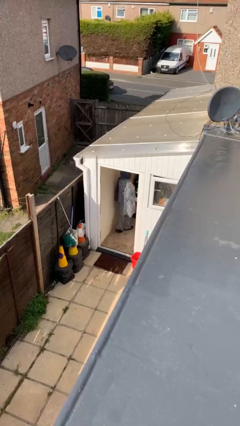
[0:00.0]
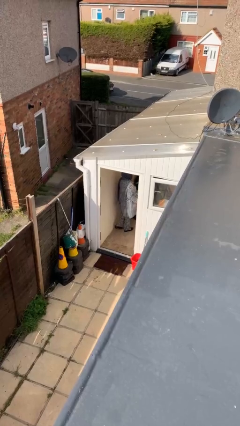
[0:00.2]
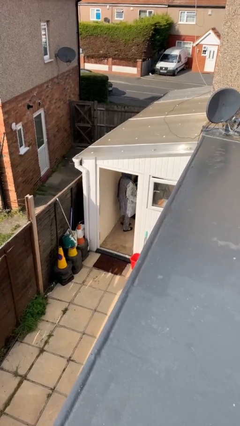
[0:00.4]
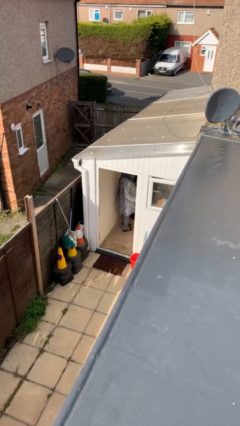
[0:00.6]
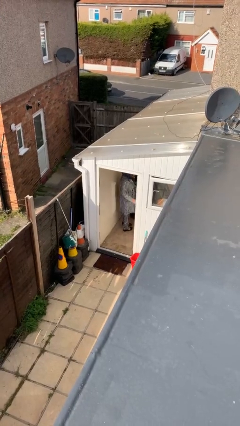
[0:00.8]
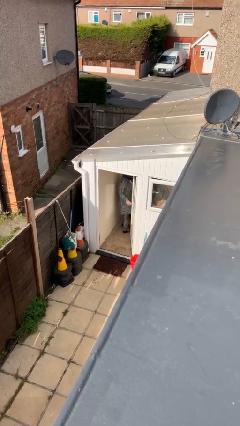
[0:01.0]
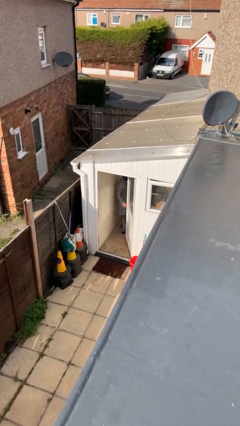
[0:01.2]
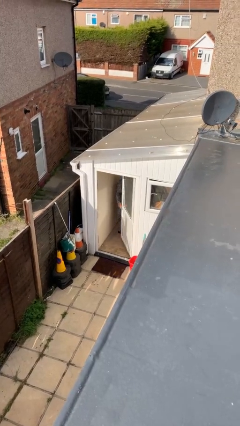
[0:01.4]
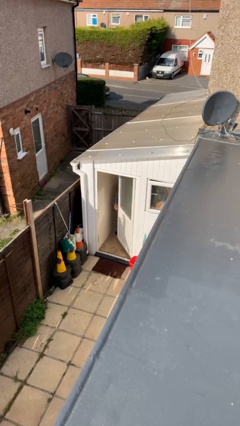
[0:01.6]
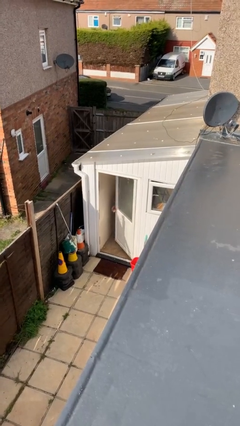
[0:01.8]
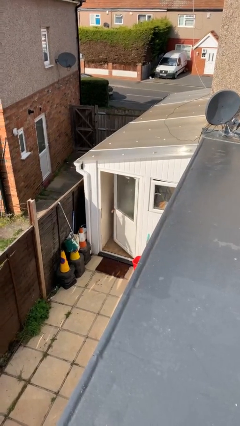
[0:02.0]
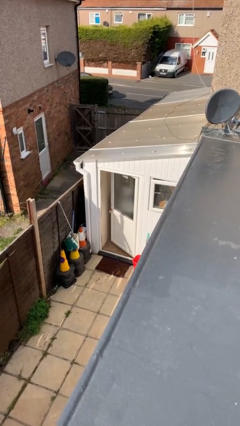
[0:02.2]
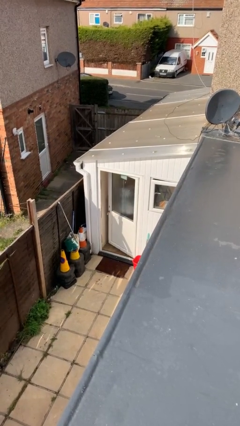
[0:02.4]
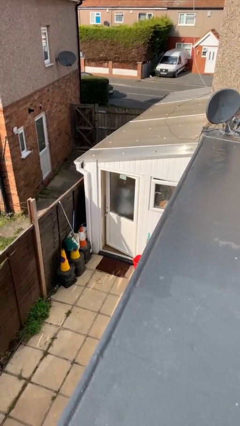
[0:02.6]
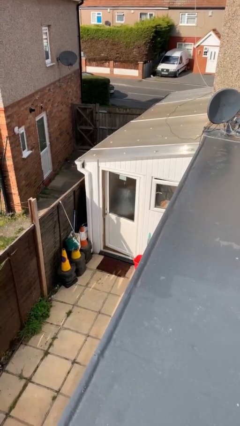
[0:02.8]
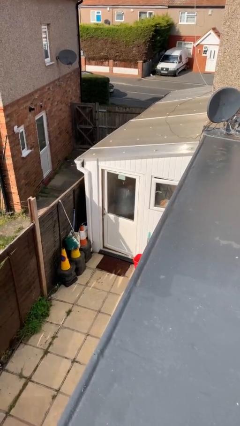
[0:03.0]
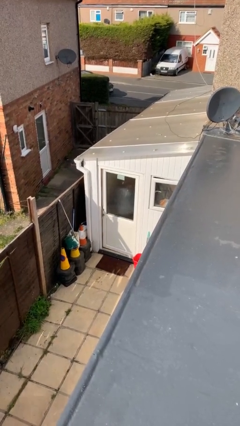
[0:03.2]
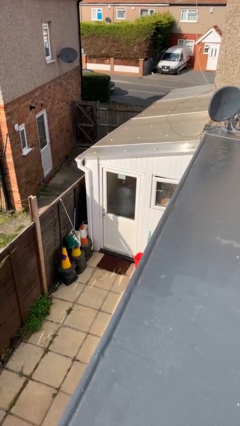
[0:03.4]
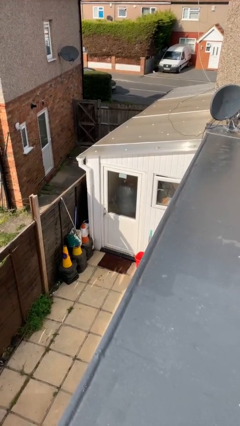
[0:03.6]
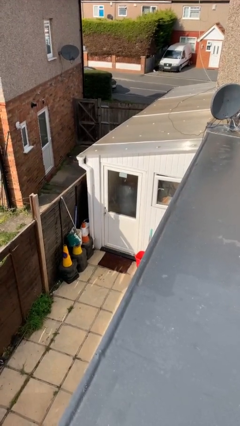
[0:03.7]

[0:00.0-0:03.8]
person closes facility door

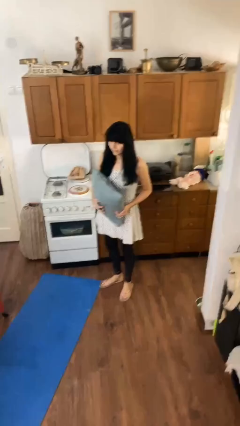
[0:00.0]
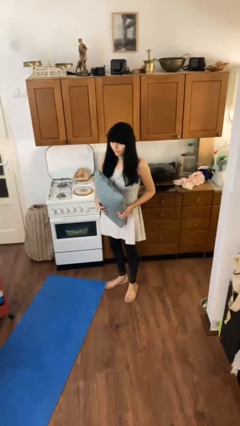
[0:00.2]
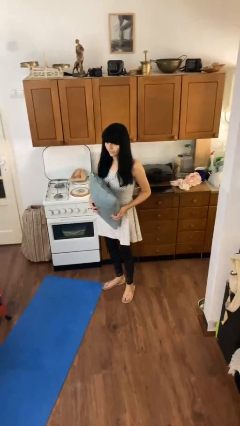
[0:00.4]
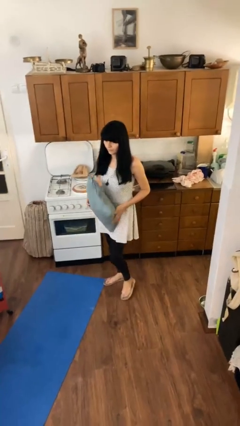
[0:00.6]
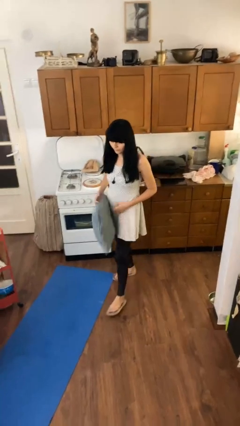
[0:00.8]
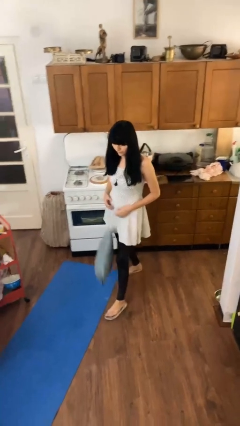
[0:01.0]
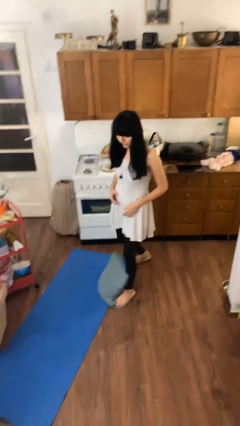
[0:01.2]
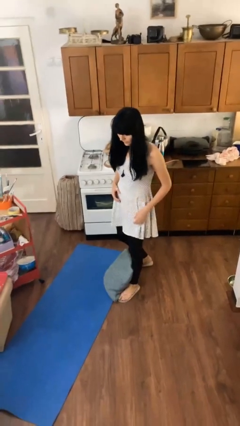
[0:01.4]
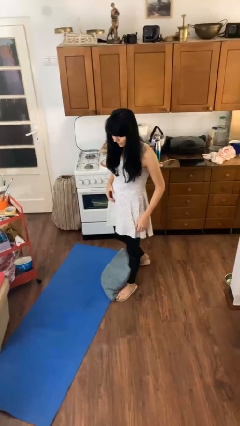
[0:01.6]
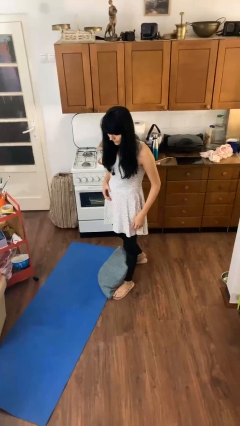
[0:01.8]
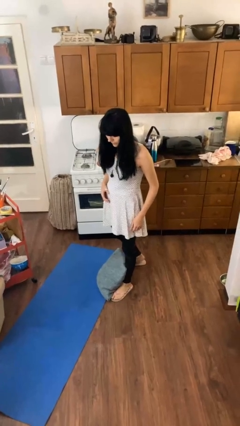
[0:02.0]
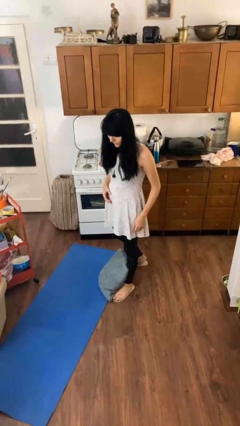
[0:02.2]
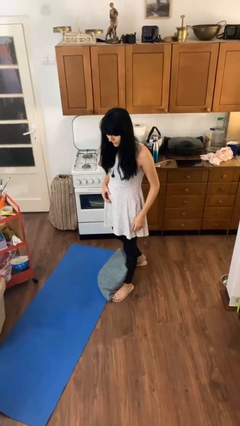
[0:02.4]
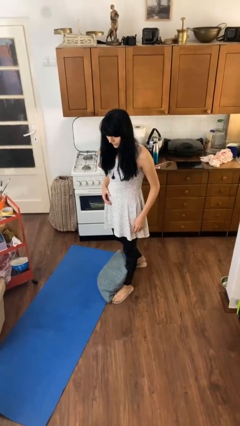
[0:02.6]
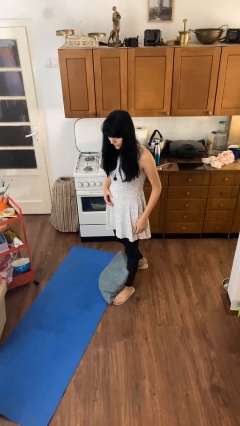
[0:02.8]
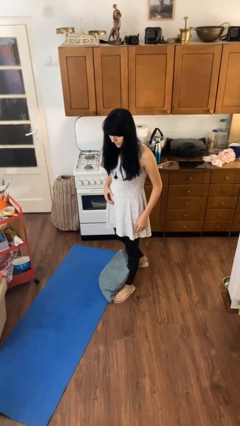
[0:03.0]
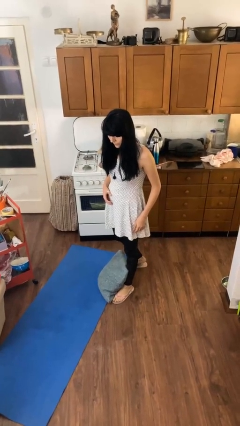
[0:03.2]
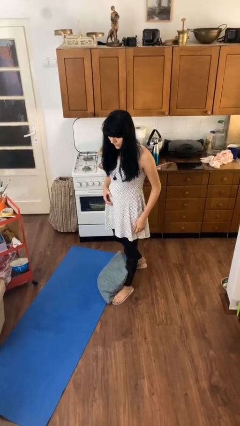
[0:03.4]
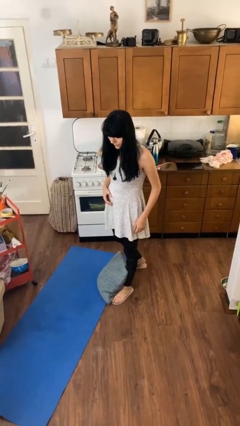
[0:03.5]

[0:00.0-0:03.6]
person drops object

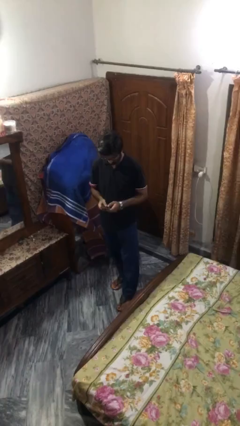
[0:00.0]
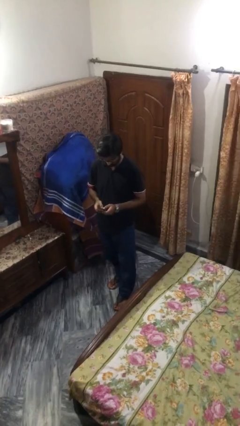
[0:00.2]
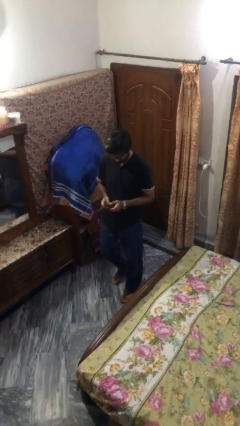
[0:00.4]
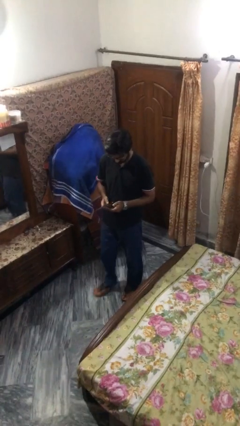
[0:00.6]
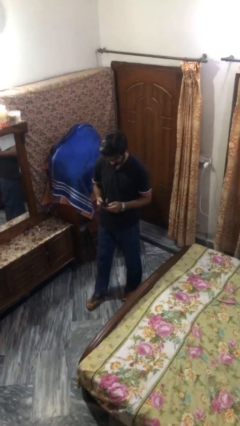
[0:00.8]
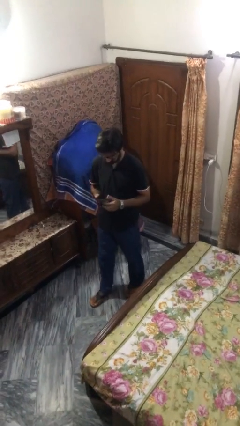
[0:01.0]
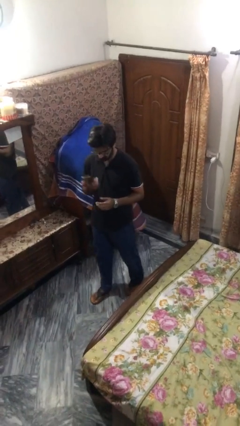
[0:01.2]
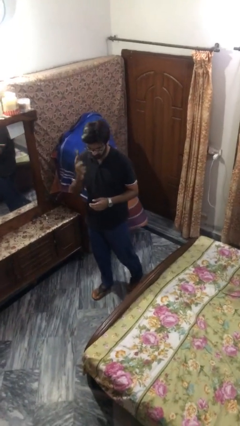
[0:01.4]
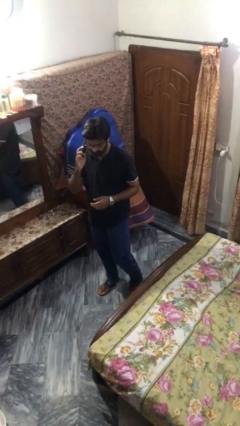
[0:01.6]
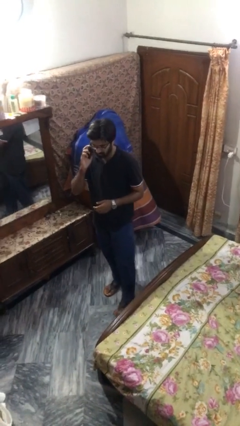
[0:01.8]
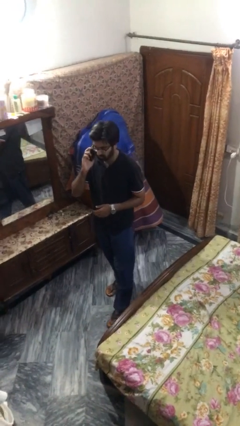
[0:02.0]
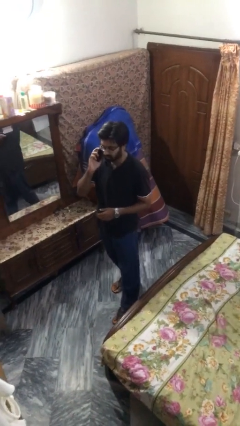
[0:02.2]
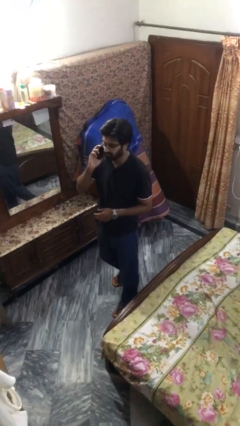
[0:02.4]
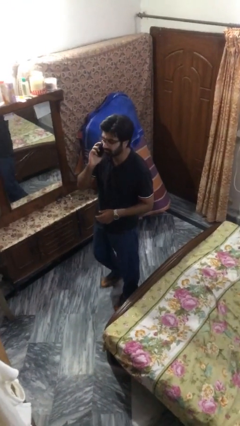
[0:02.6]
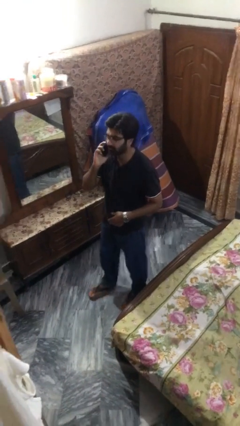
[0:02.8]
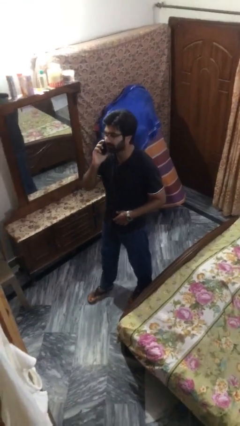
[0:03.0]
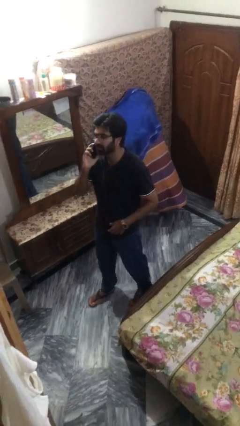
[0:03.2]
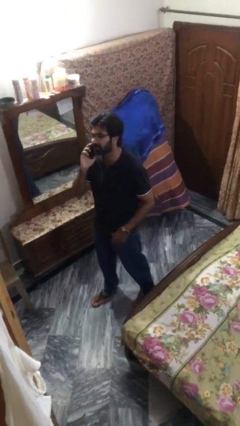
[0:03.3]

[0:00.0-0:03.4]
person talks on phone

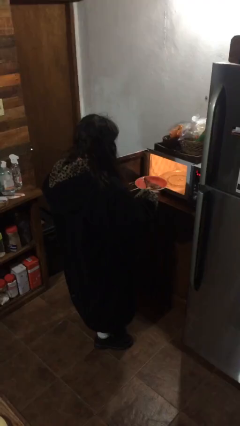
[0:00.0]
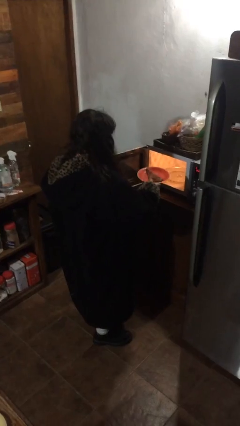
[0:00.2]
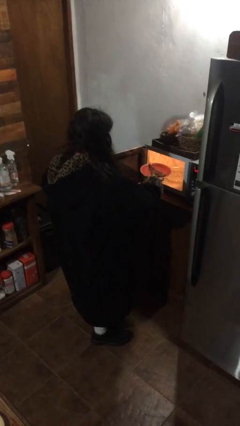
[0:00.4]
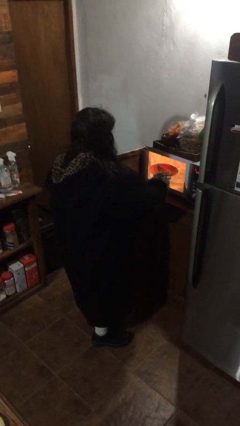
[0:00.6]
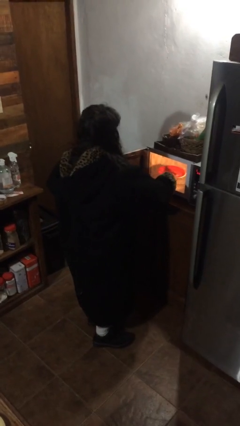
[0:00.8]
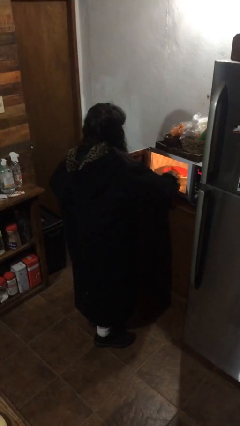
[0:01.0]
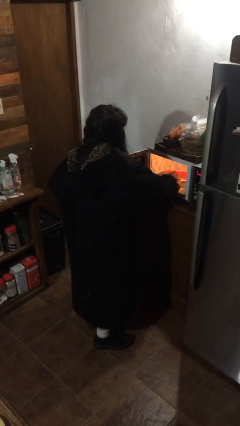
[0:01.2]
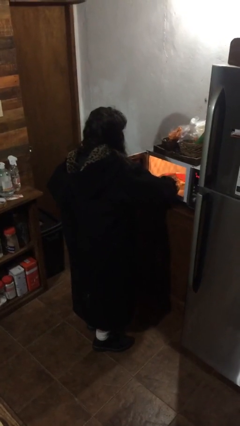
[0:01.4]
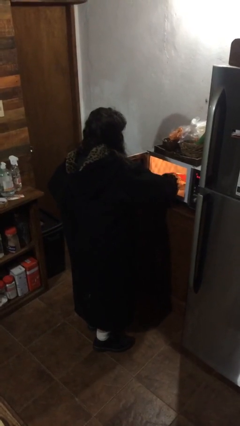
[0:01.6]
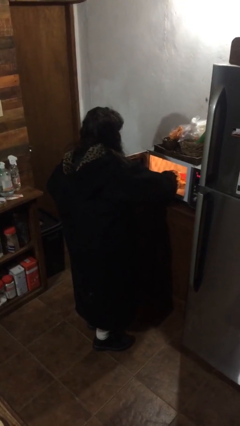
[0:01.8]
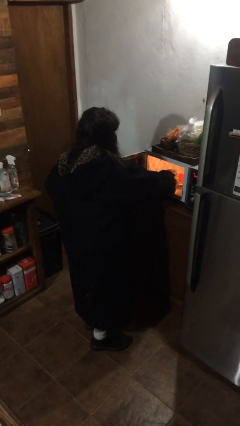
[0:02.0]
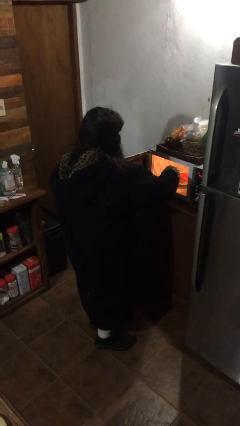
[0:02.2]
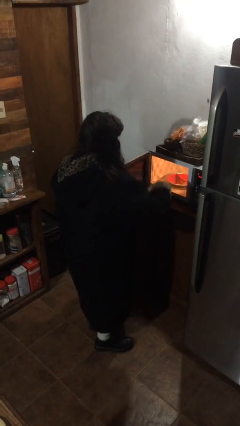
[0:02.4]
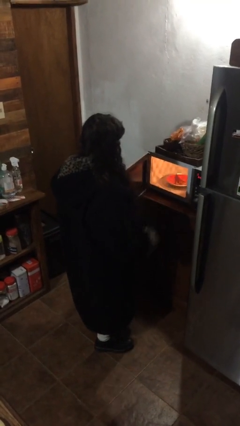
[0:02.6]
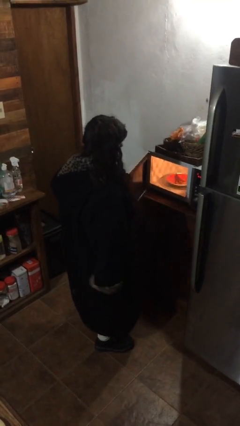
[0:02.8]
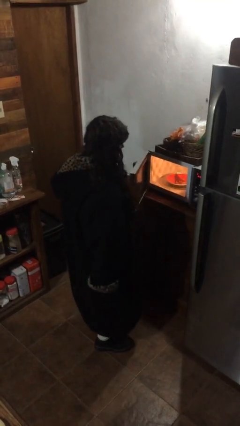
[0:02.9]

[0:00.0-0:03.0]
person puts object into microwave

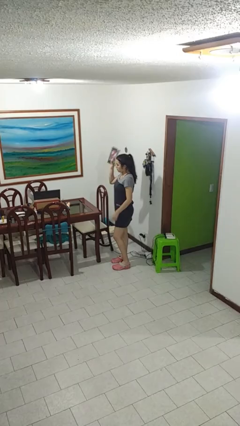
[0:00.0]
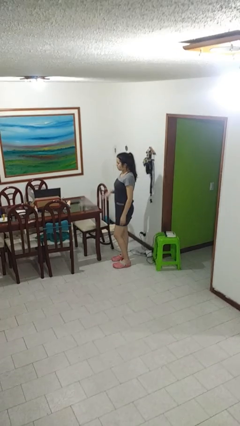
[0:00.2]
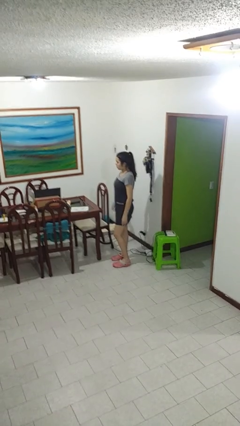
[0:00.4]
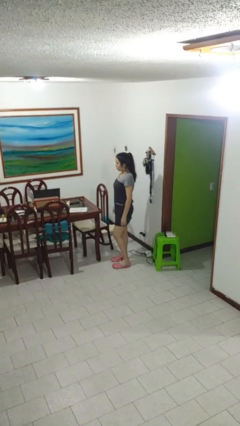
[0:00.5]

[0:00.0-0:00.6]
person throws object on table

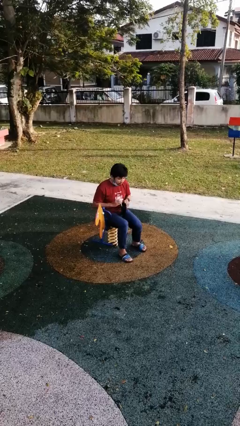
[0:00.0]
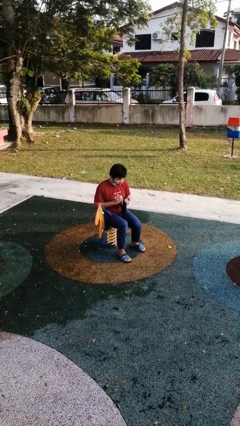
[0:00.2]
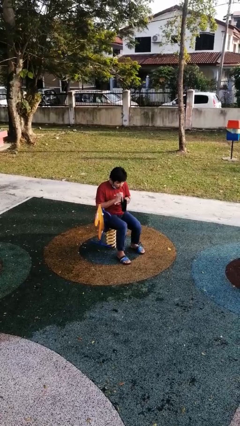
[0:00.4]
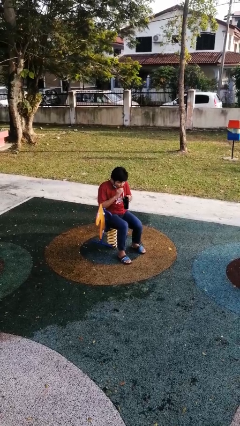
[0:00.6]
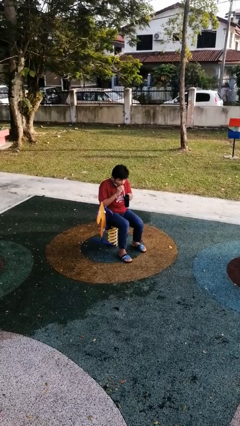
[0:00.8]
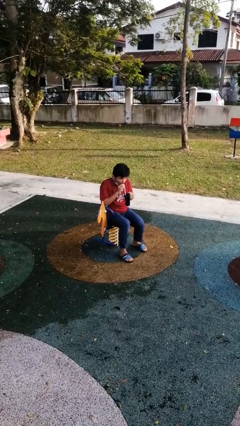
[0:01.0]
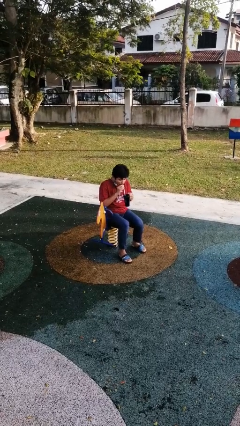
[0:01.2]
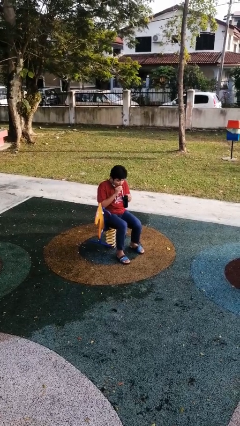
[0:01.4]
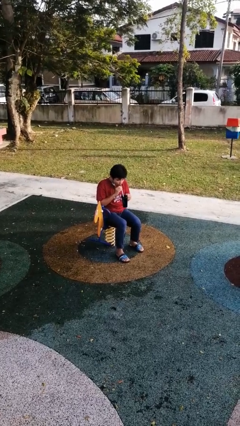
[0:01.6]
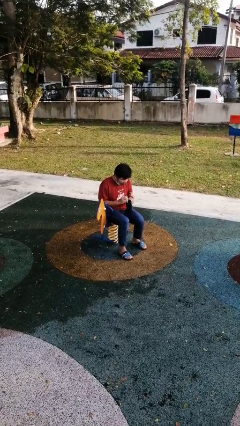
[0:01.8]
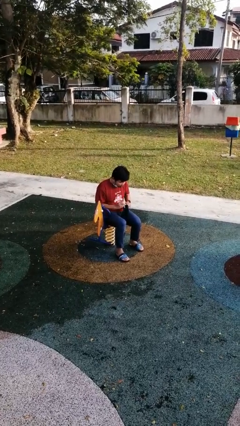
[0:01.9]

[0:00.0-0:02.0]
person drinks from straw

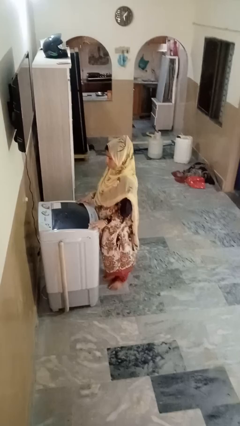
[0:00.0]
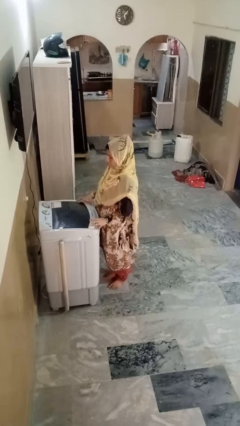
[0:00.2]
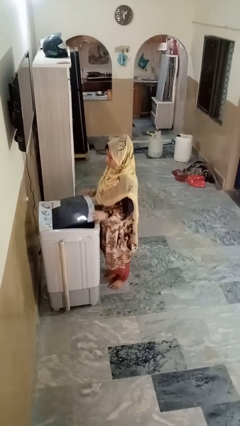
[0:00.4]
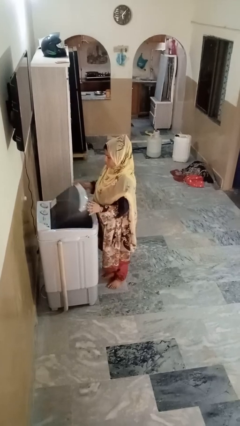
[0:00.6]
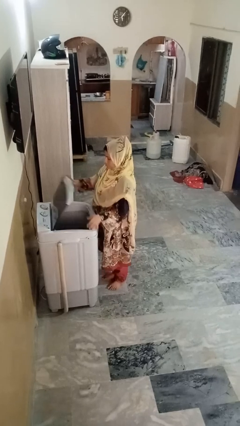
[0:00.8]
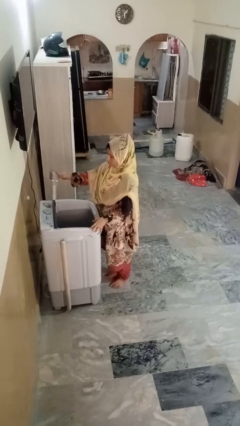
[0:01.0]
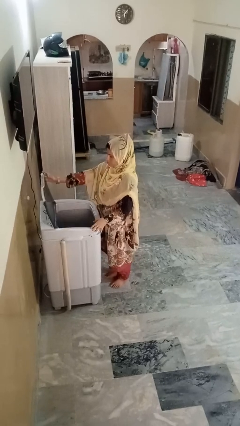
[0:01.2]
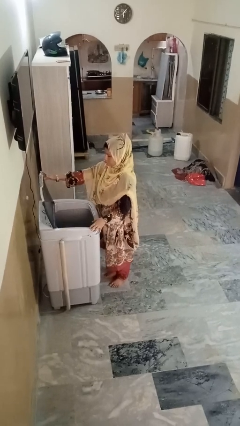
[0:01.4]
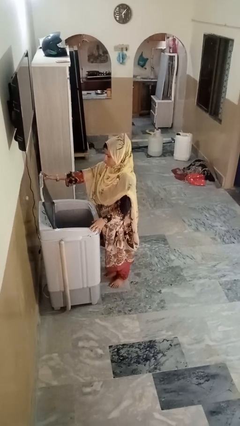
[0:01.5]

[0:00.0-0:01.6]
person opens clothes washer
